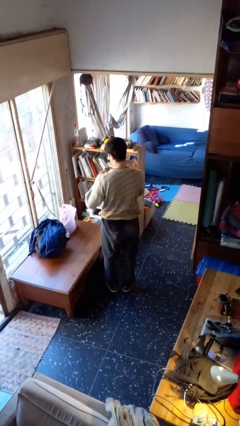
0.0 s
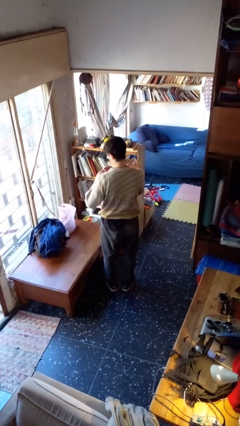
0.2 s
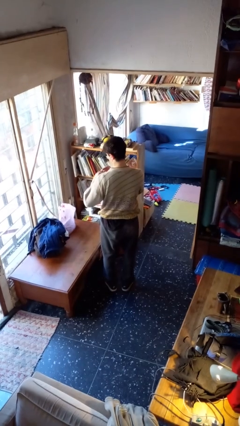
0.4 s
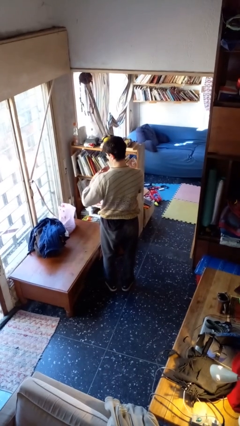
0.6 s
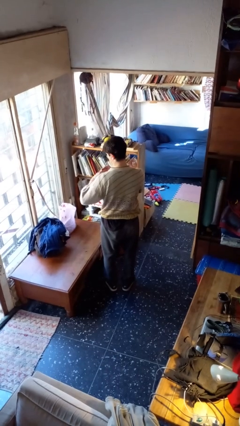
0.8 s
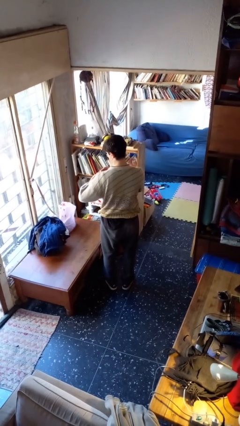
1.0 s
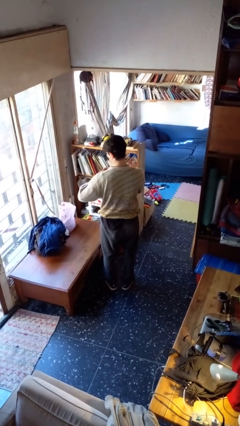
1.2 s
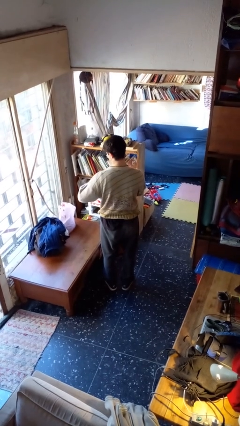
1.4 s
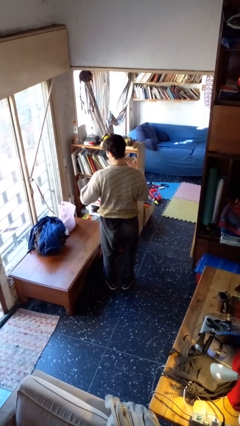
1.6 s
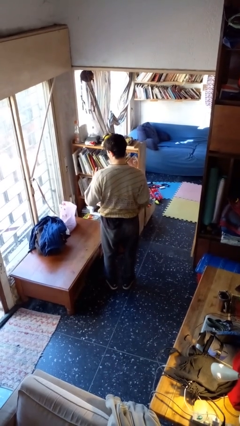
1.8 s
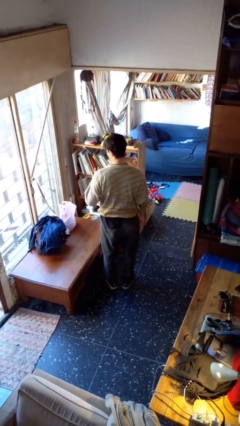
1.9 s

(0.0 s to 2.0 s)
person puts on ring

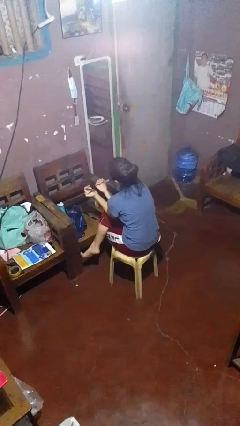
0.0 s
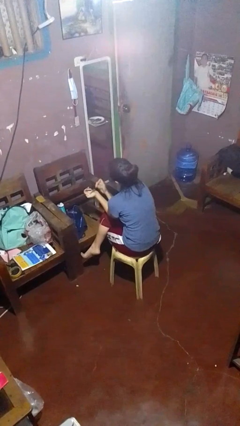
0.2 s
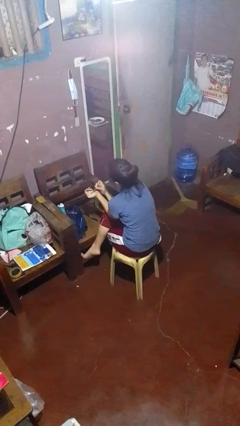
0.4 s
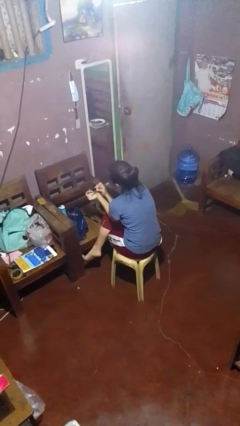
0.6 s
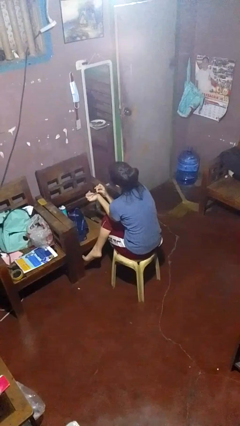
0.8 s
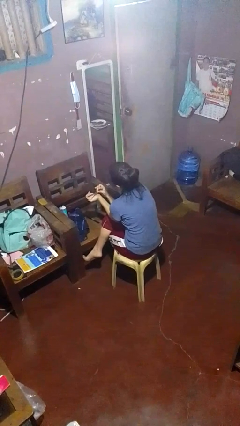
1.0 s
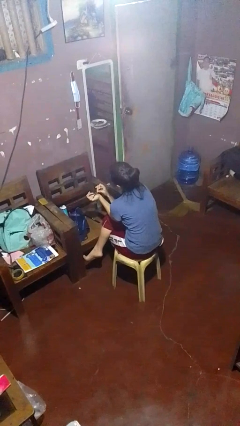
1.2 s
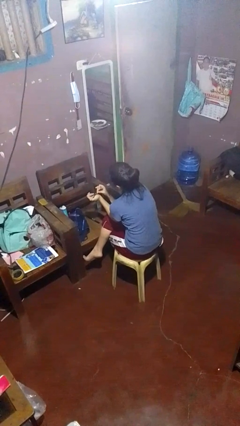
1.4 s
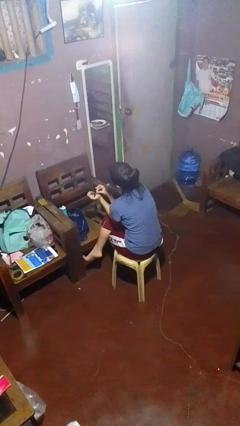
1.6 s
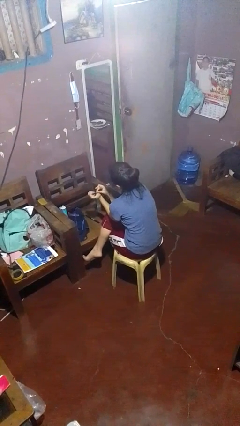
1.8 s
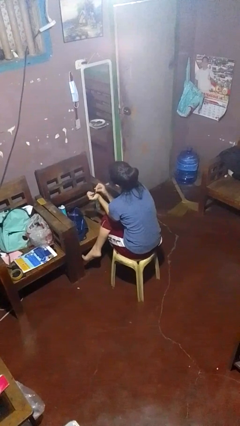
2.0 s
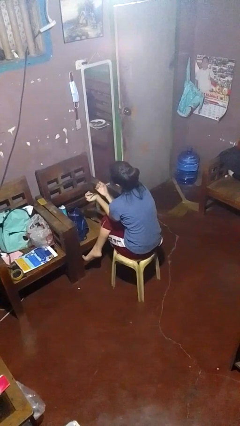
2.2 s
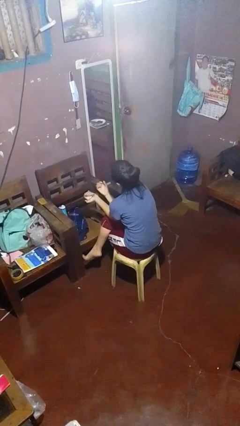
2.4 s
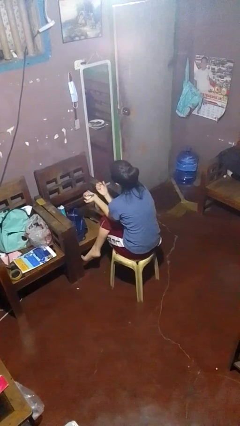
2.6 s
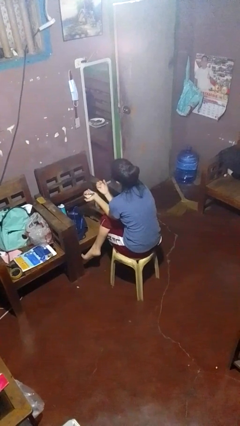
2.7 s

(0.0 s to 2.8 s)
person clips fingernails

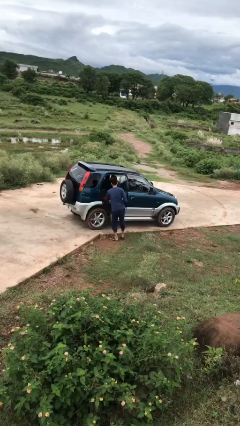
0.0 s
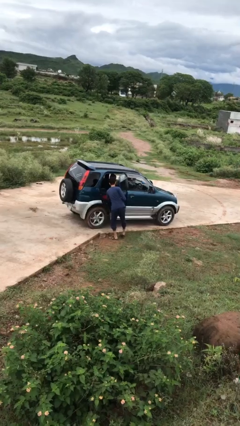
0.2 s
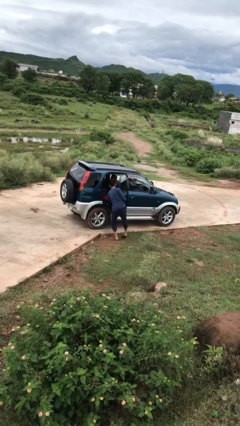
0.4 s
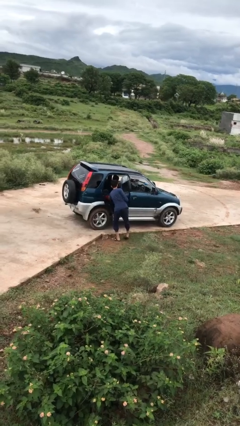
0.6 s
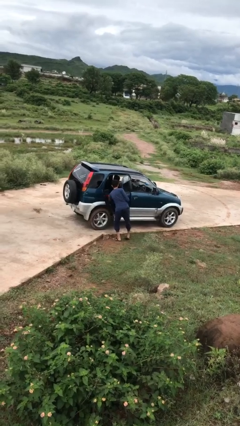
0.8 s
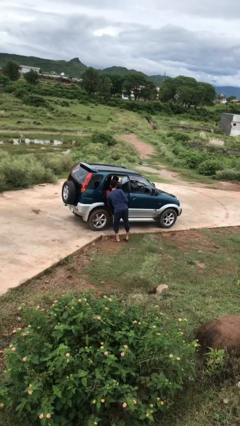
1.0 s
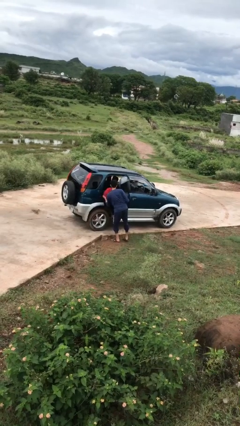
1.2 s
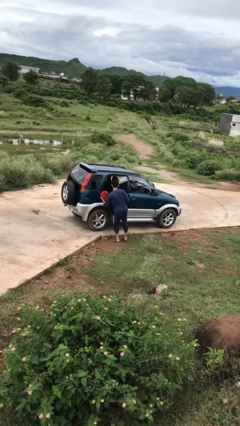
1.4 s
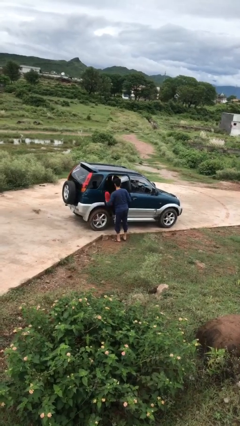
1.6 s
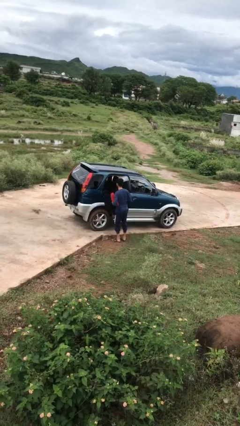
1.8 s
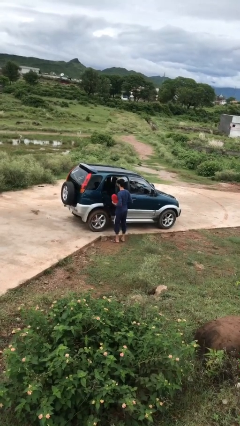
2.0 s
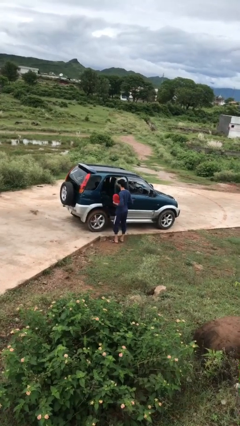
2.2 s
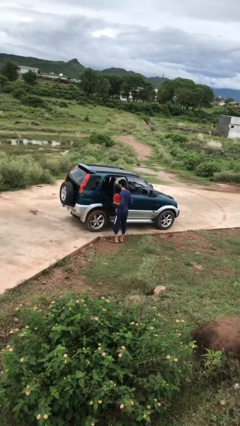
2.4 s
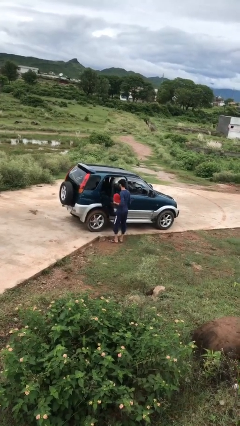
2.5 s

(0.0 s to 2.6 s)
person unloads car

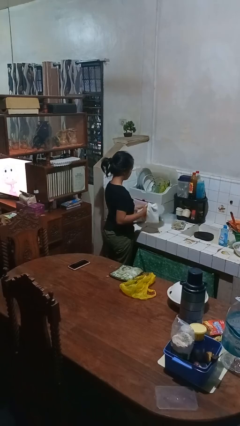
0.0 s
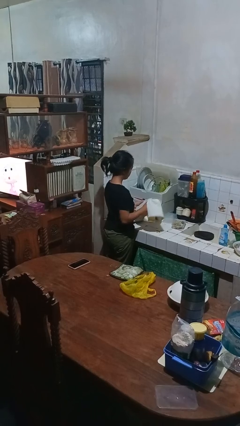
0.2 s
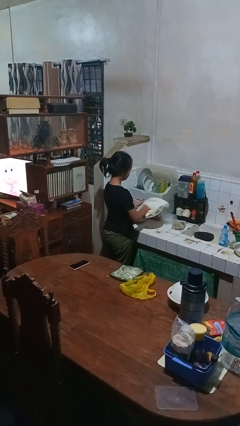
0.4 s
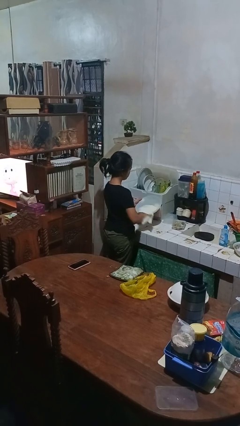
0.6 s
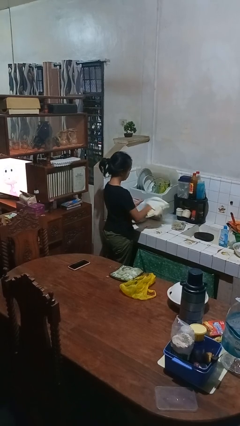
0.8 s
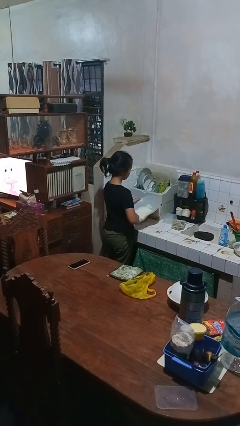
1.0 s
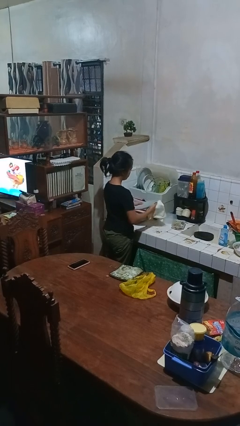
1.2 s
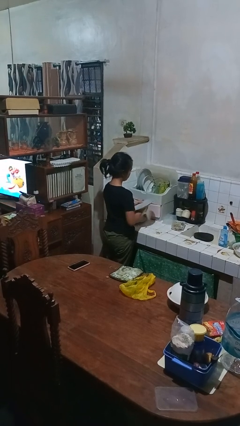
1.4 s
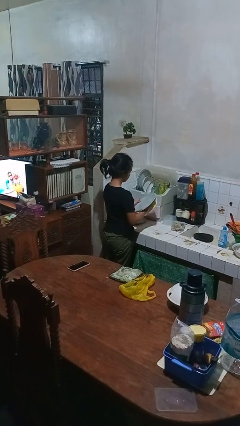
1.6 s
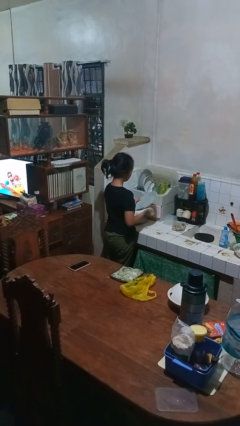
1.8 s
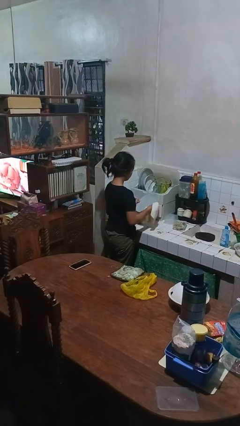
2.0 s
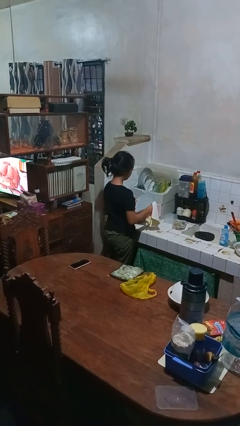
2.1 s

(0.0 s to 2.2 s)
person dries dish

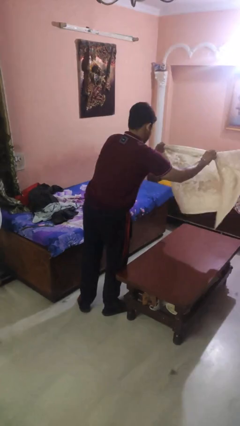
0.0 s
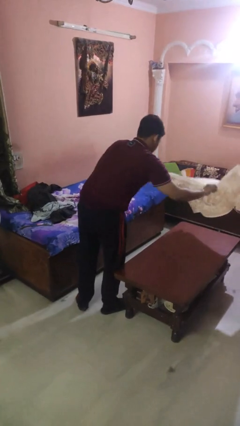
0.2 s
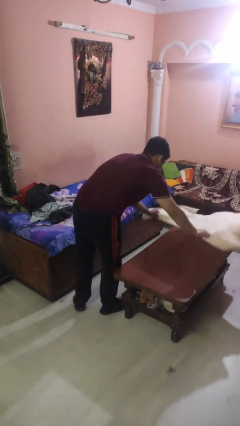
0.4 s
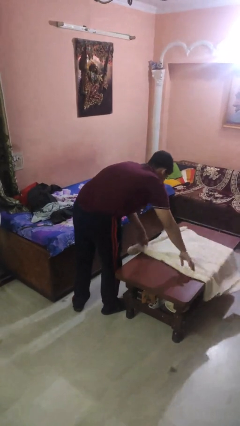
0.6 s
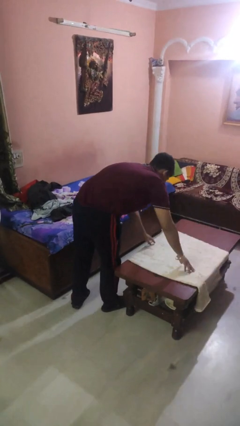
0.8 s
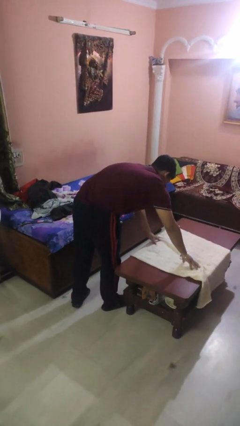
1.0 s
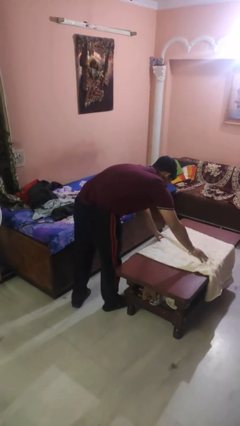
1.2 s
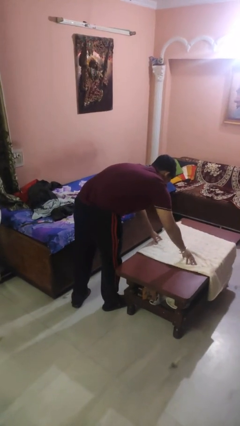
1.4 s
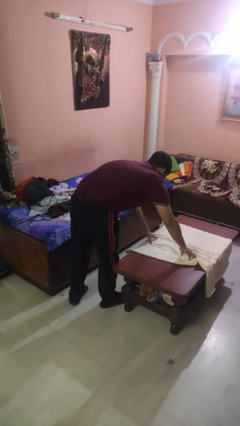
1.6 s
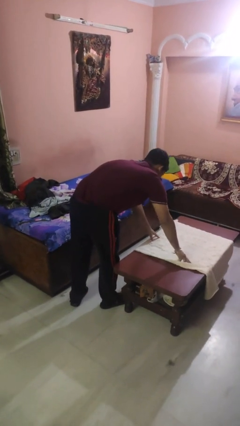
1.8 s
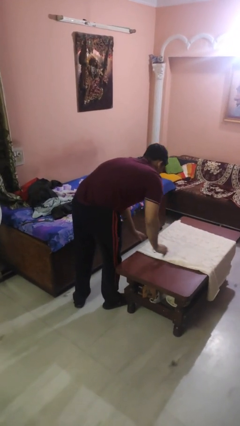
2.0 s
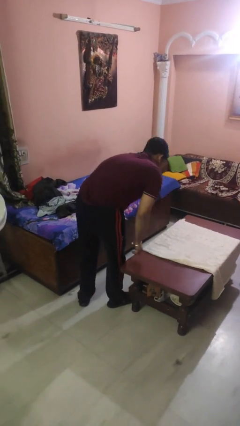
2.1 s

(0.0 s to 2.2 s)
person spreads tablecloth

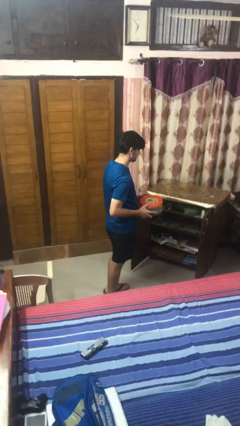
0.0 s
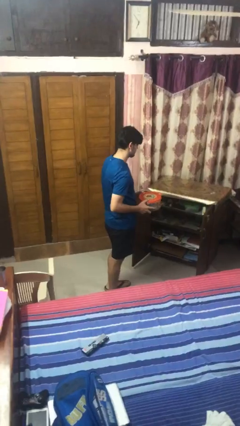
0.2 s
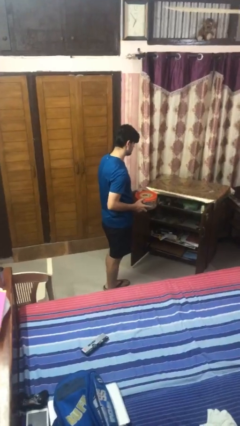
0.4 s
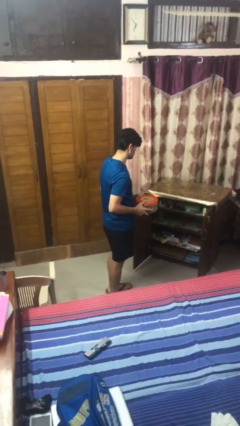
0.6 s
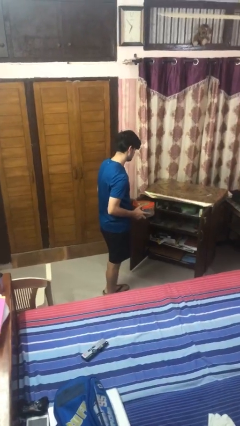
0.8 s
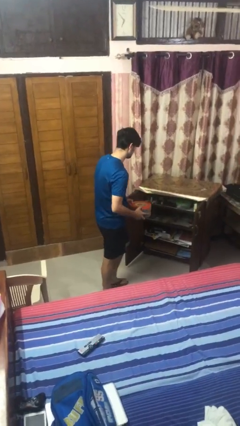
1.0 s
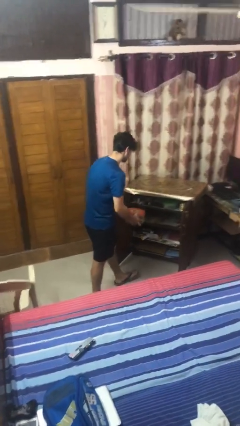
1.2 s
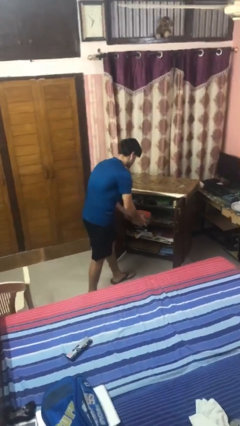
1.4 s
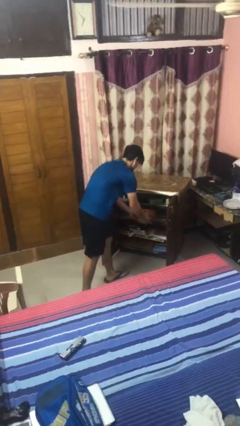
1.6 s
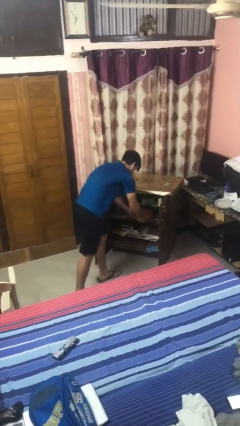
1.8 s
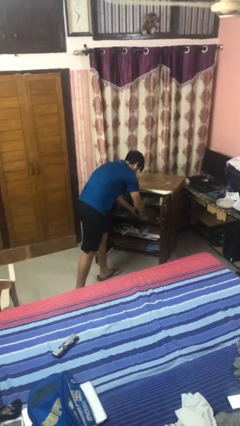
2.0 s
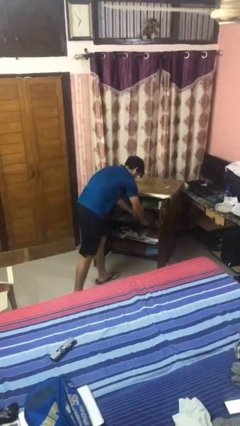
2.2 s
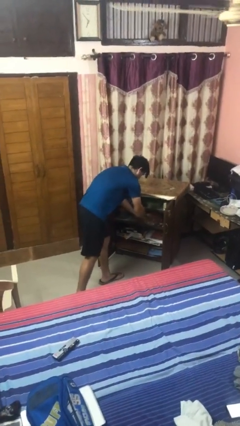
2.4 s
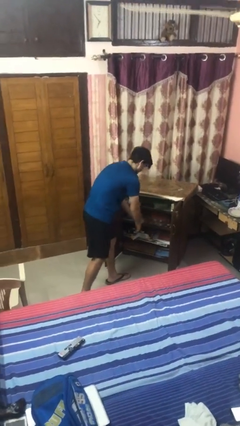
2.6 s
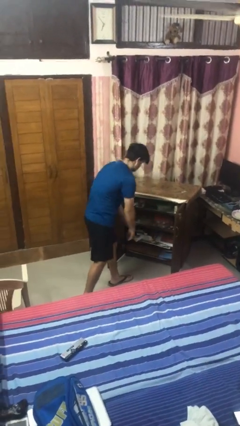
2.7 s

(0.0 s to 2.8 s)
person puts down object into cabinet

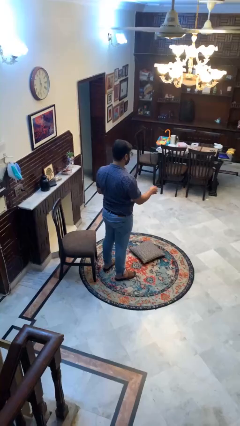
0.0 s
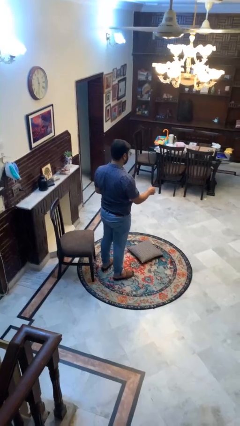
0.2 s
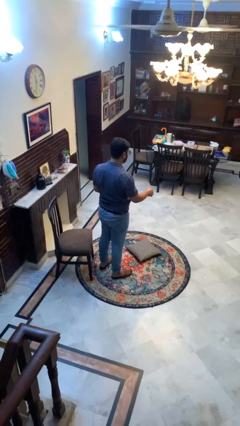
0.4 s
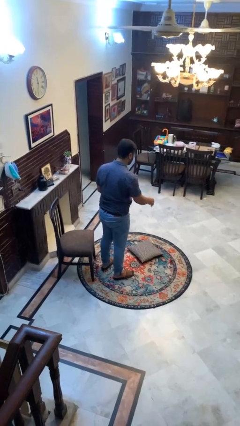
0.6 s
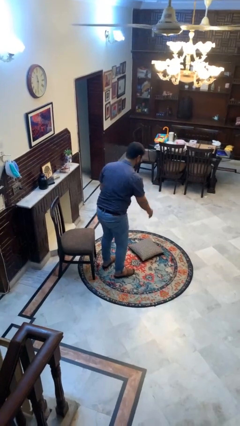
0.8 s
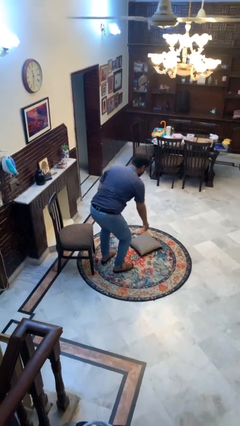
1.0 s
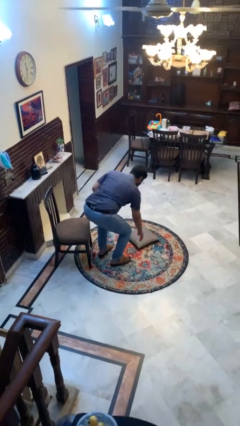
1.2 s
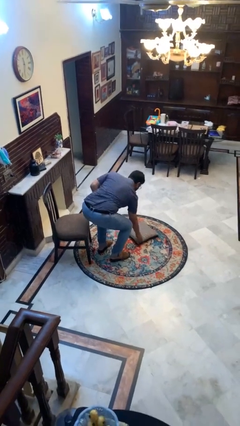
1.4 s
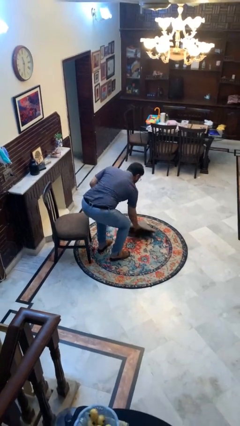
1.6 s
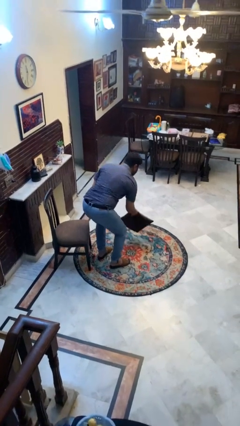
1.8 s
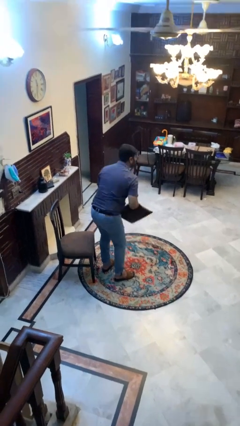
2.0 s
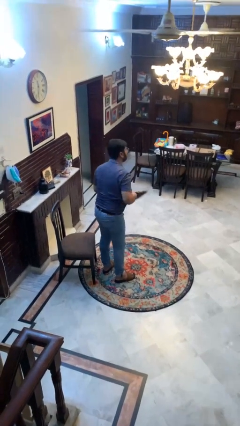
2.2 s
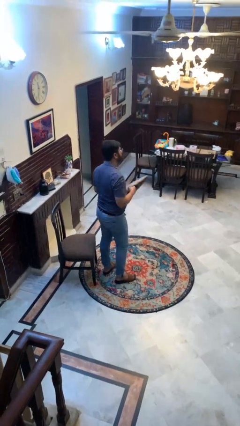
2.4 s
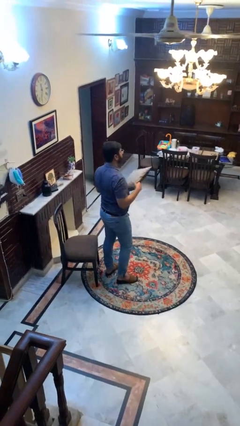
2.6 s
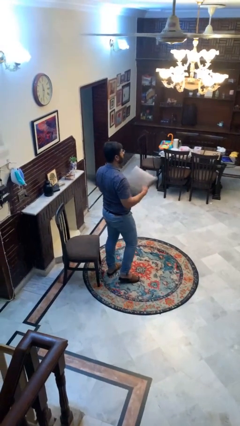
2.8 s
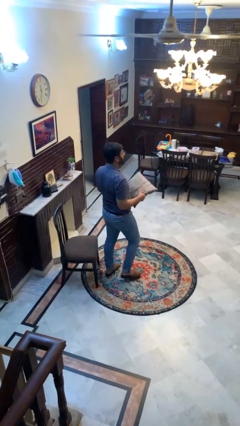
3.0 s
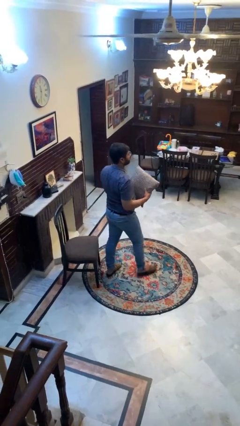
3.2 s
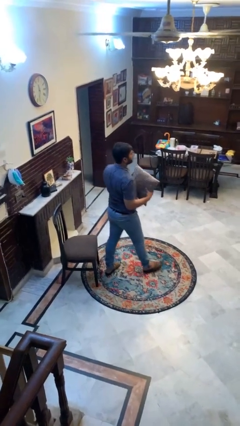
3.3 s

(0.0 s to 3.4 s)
person picks up object from floor
